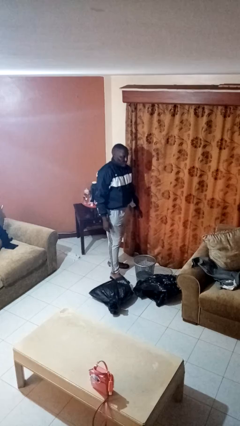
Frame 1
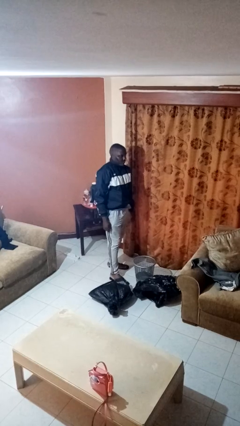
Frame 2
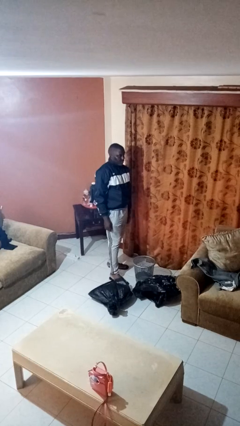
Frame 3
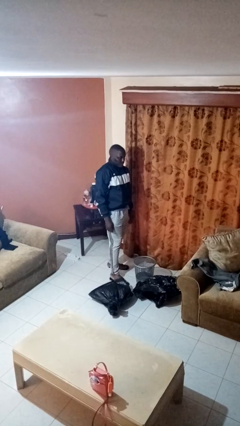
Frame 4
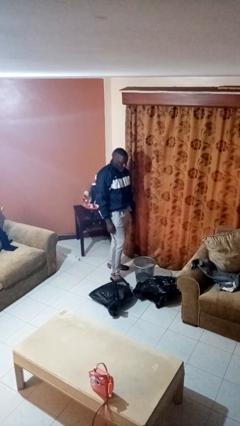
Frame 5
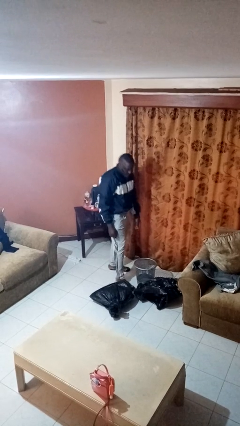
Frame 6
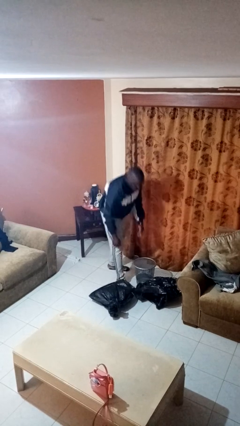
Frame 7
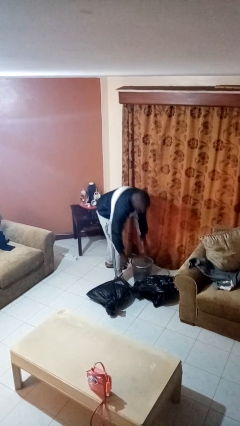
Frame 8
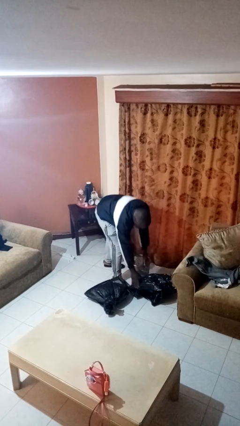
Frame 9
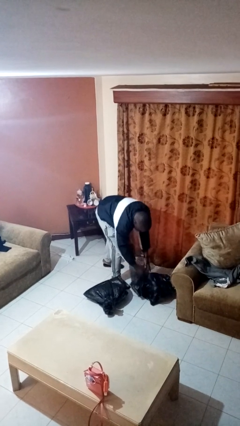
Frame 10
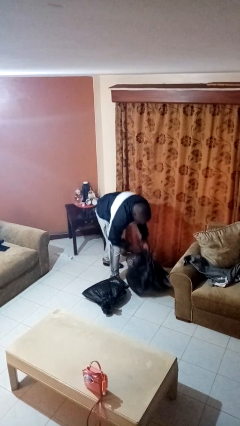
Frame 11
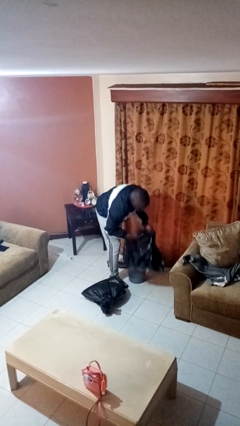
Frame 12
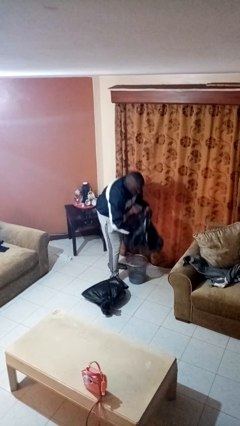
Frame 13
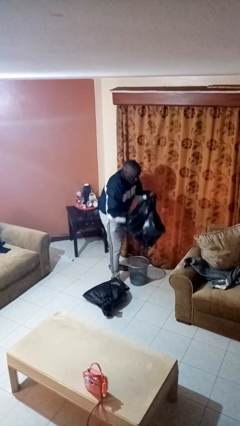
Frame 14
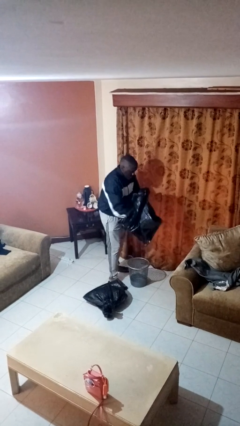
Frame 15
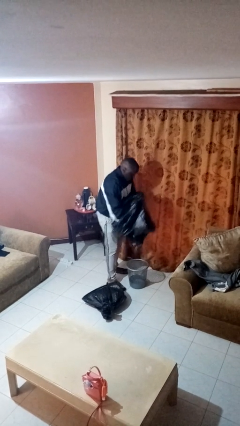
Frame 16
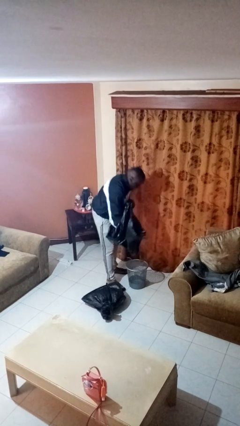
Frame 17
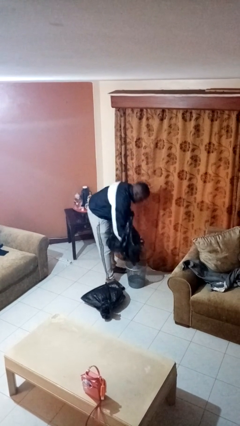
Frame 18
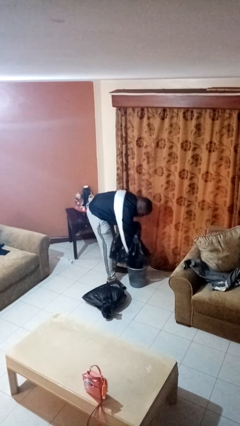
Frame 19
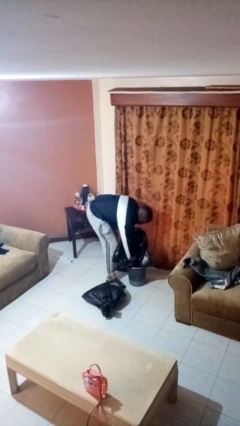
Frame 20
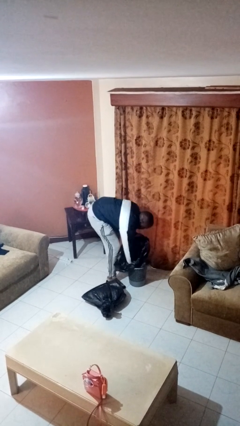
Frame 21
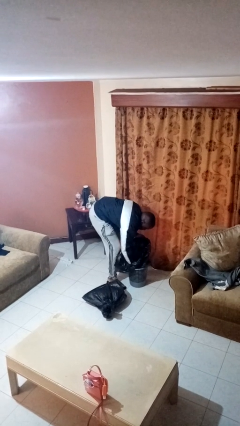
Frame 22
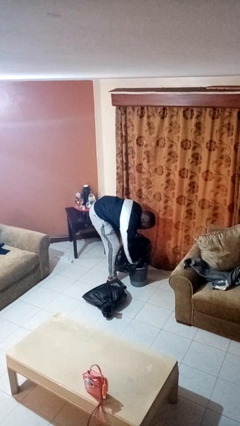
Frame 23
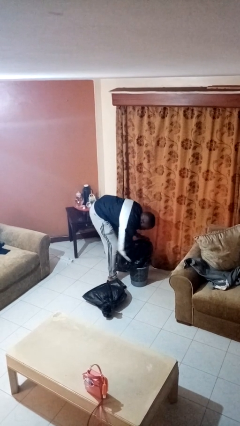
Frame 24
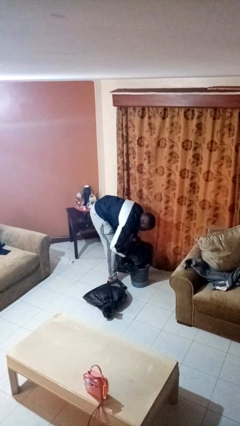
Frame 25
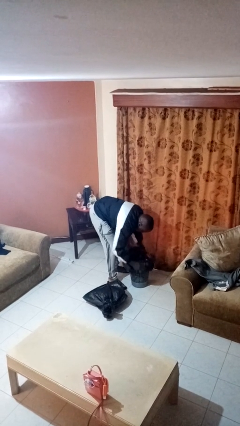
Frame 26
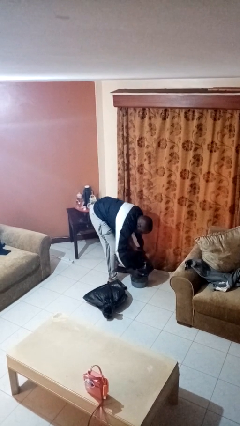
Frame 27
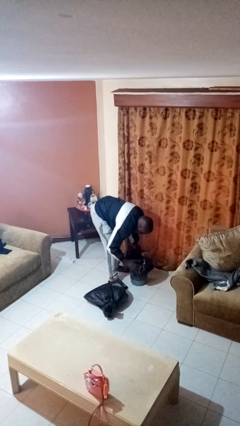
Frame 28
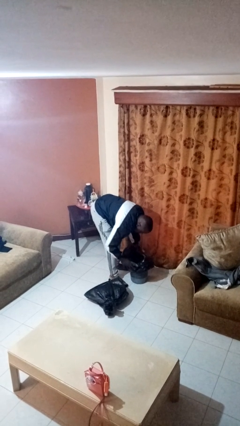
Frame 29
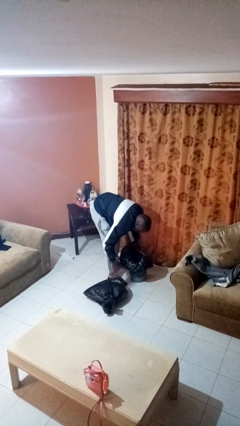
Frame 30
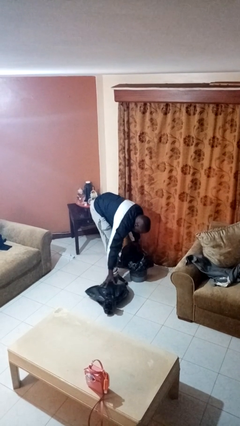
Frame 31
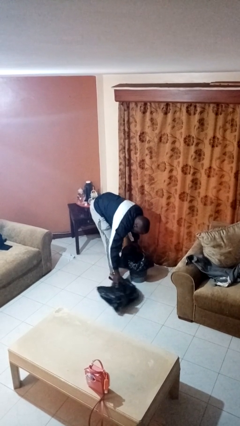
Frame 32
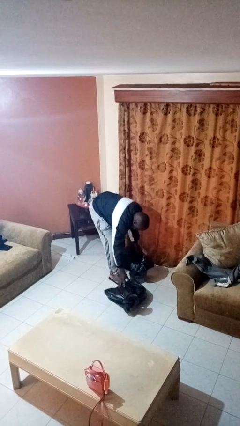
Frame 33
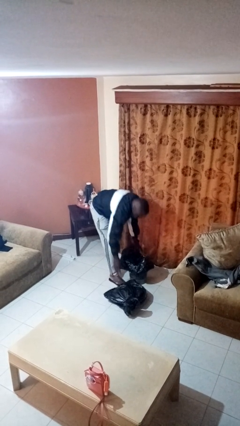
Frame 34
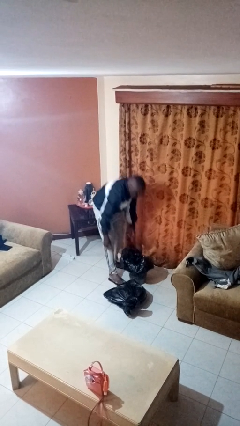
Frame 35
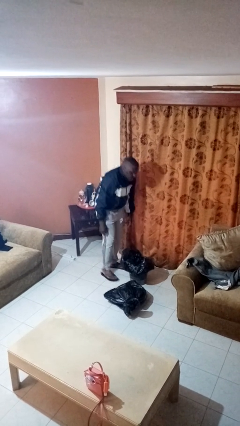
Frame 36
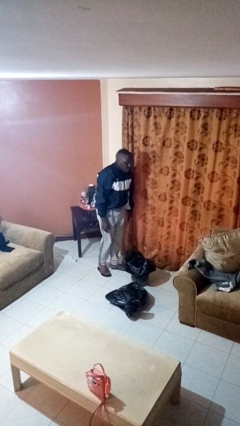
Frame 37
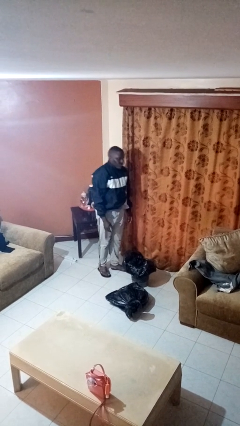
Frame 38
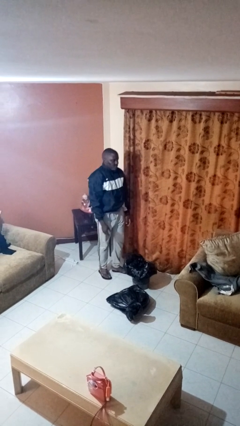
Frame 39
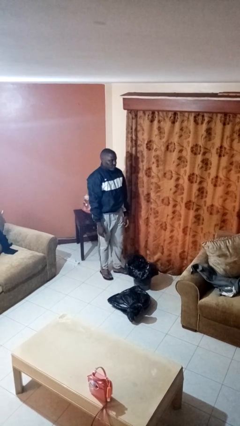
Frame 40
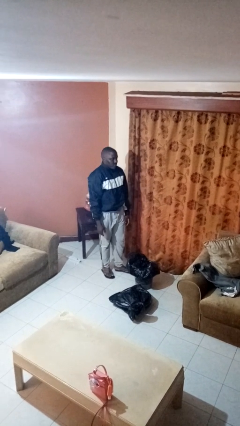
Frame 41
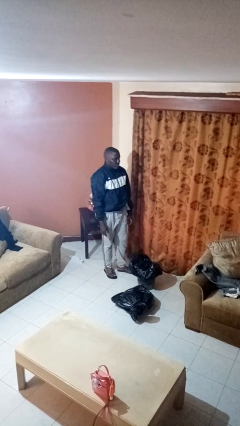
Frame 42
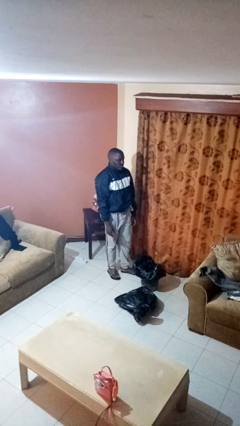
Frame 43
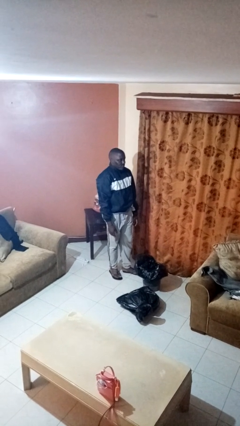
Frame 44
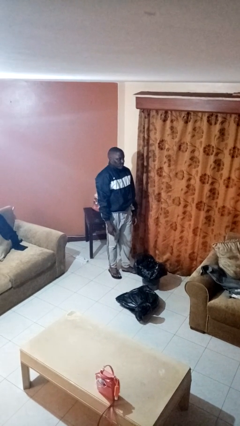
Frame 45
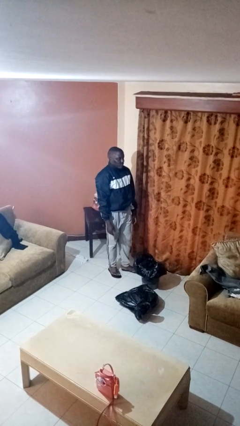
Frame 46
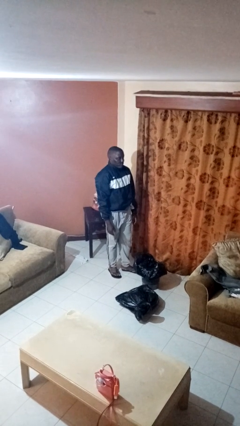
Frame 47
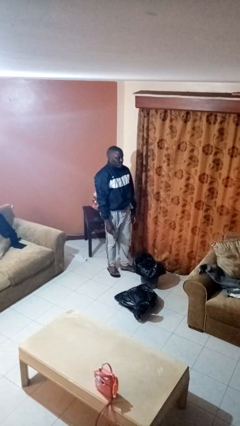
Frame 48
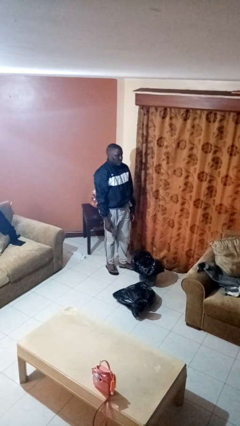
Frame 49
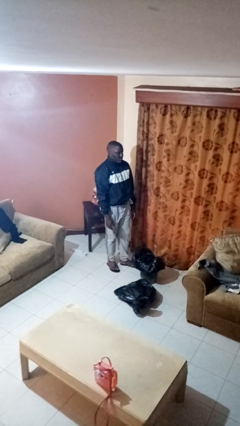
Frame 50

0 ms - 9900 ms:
person inserts trashbag into trashcan

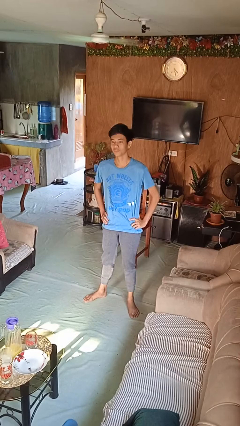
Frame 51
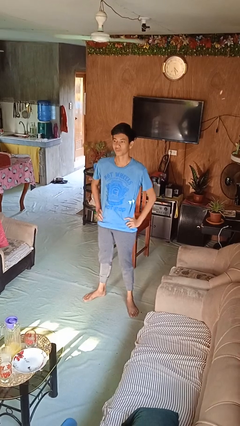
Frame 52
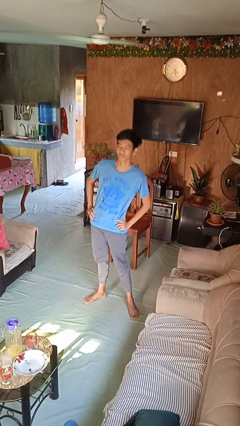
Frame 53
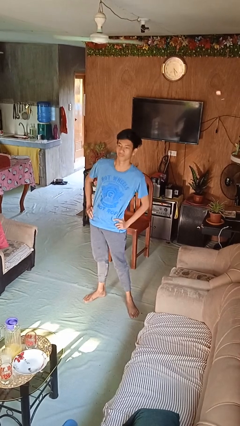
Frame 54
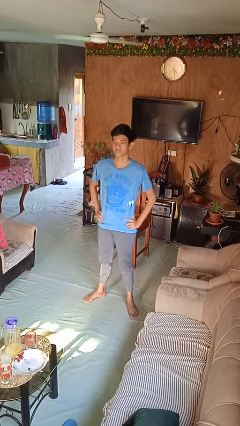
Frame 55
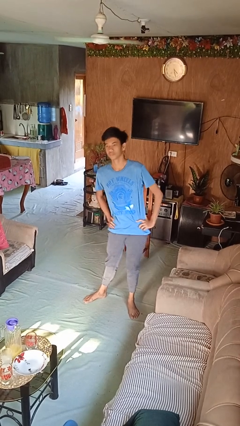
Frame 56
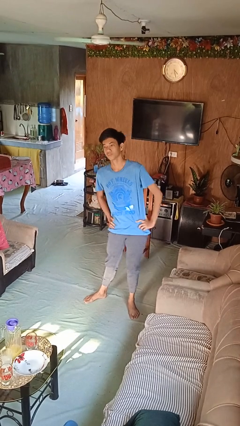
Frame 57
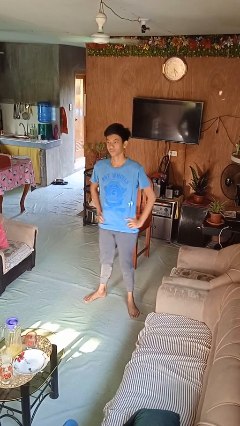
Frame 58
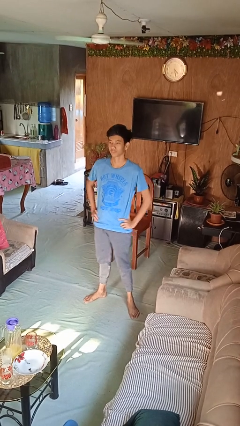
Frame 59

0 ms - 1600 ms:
person wiggles hips

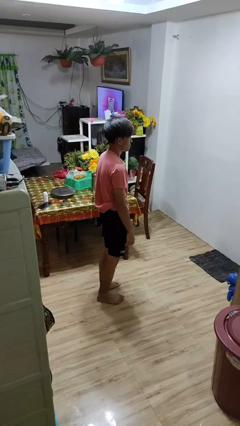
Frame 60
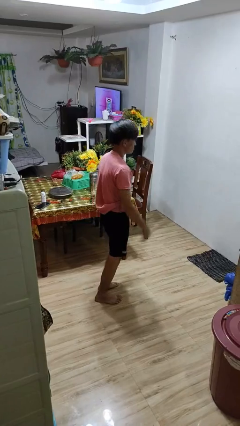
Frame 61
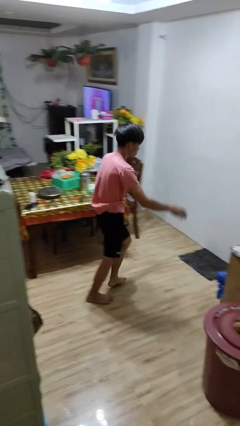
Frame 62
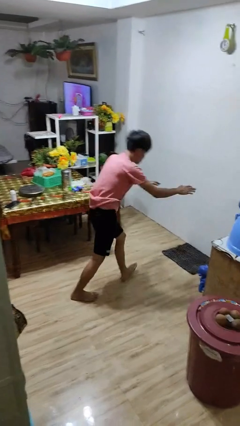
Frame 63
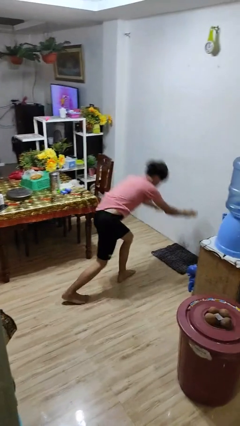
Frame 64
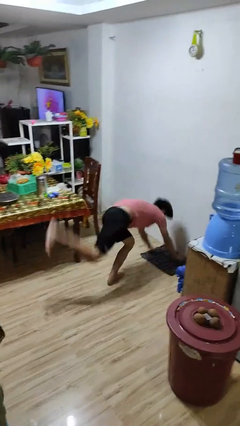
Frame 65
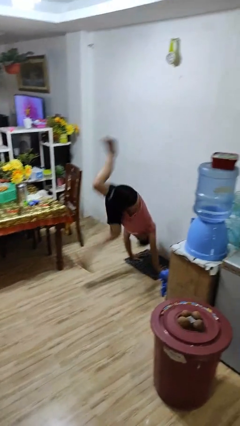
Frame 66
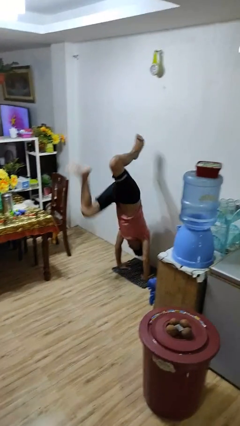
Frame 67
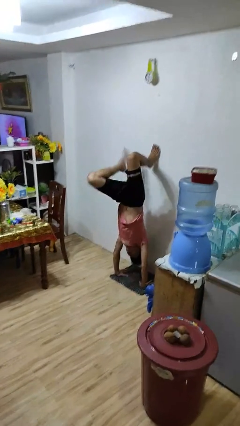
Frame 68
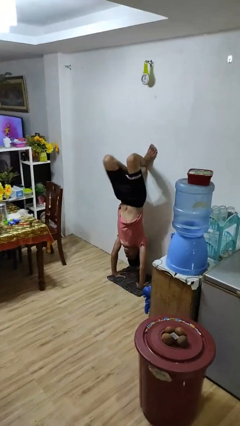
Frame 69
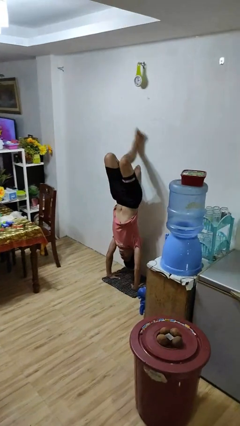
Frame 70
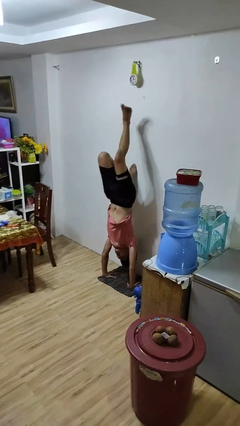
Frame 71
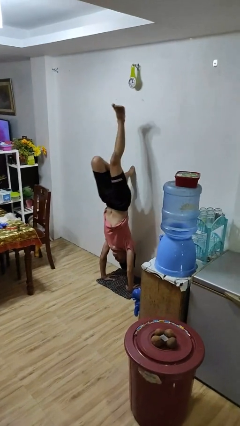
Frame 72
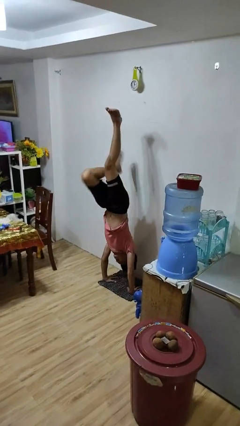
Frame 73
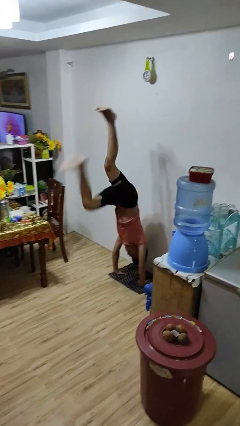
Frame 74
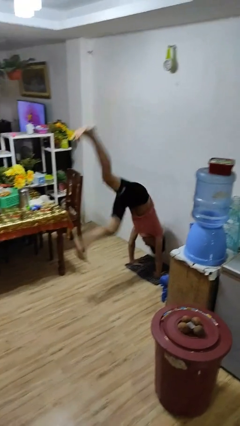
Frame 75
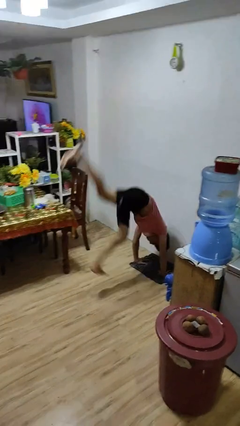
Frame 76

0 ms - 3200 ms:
person handstand

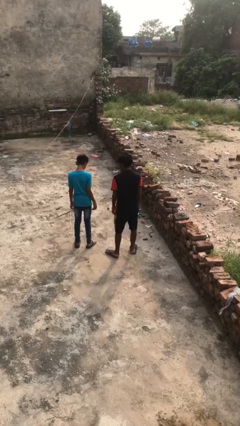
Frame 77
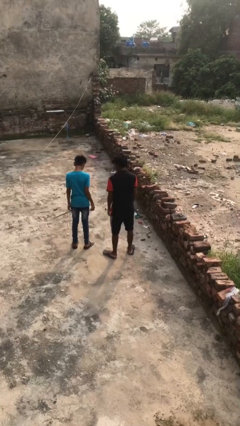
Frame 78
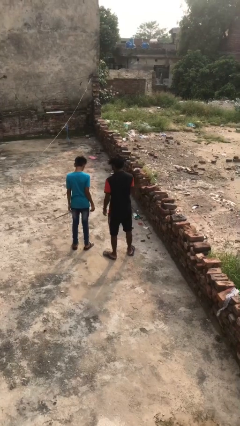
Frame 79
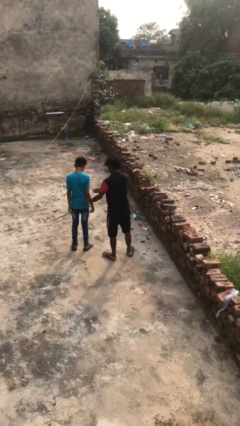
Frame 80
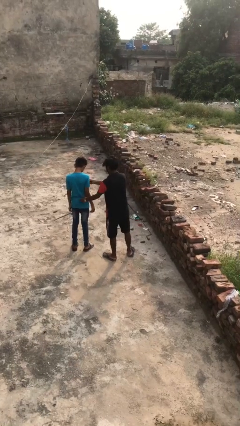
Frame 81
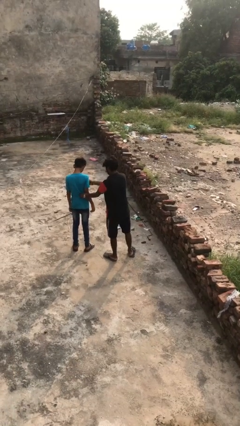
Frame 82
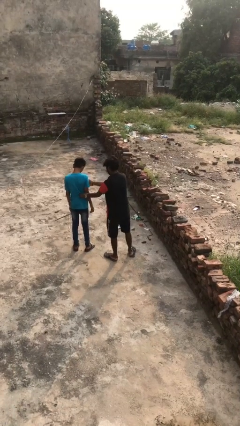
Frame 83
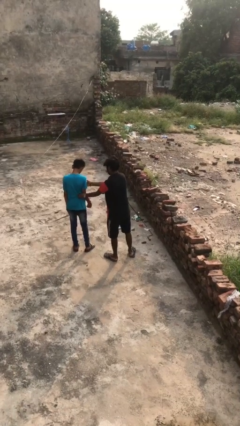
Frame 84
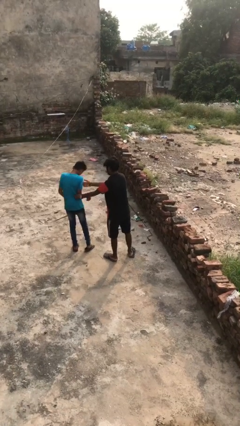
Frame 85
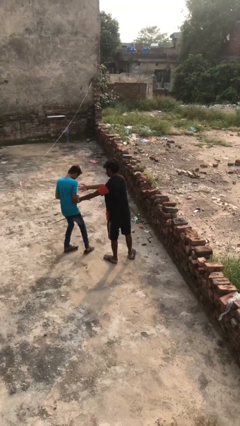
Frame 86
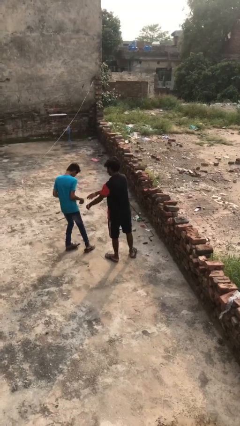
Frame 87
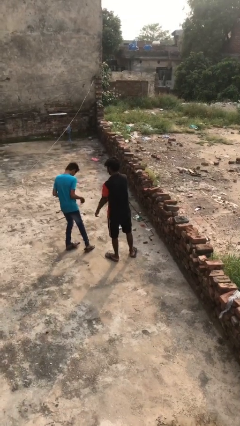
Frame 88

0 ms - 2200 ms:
person tickles person

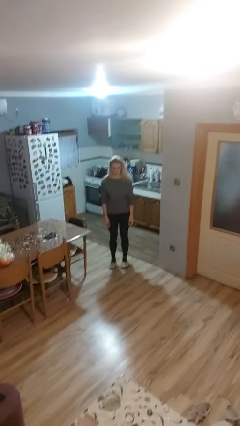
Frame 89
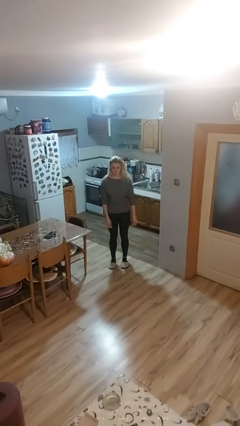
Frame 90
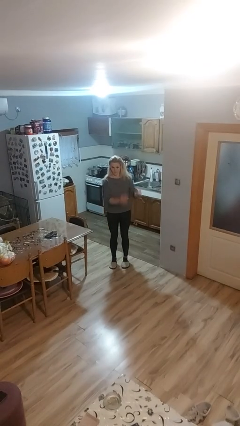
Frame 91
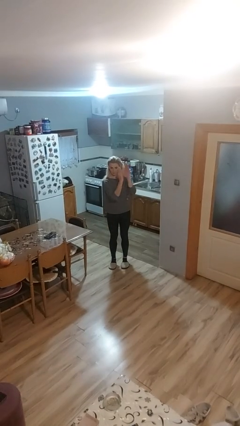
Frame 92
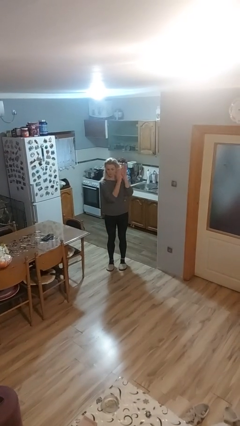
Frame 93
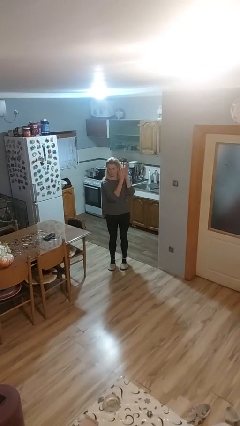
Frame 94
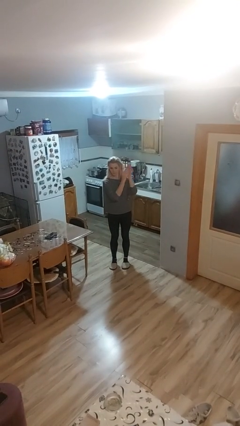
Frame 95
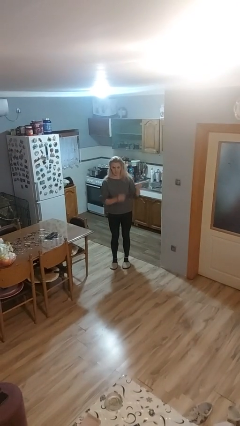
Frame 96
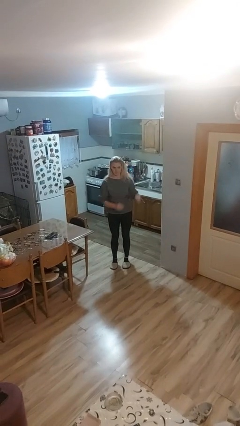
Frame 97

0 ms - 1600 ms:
person claps hands
